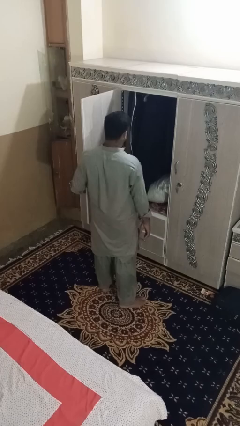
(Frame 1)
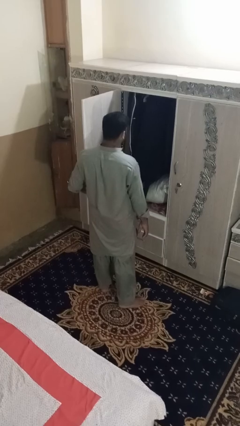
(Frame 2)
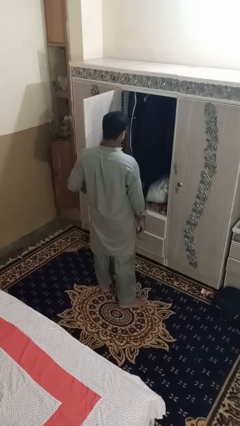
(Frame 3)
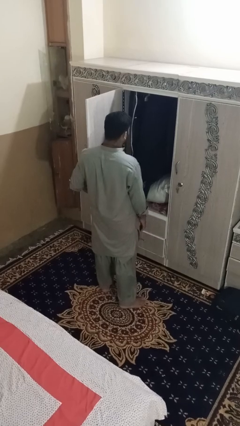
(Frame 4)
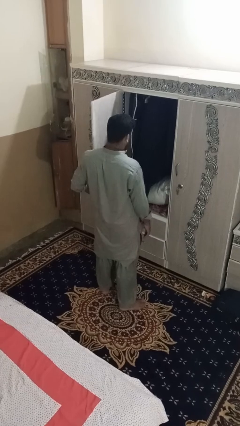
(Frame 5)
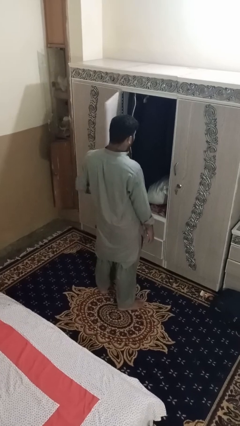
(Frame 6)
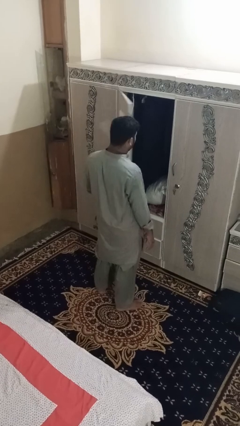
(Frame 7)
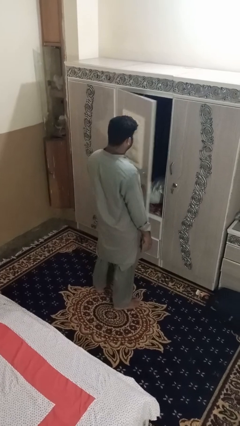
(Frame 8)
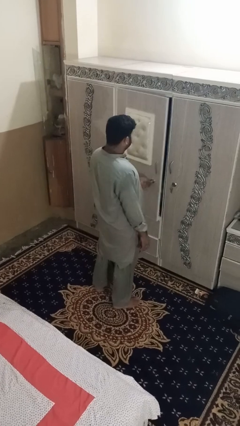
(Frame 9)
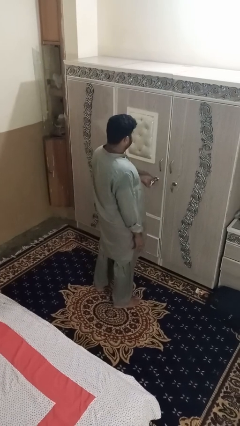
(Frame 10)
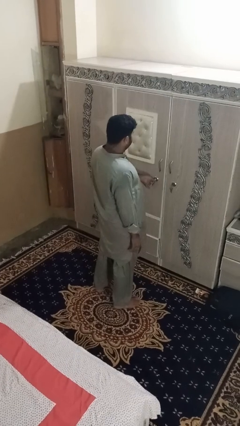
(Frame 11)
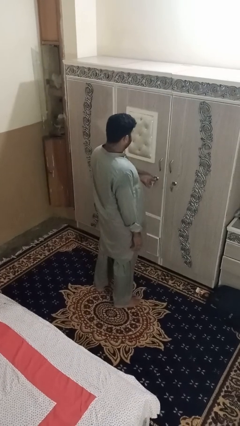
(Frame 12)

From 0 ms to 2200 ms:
person closes dresser drawer

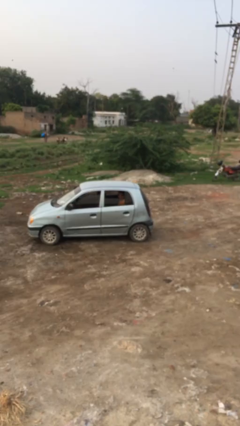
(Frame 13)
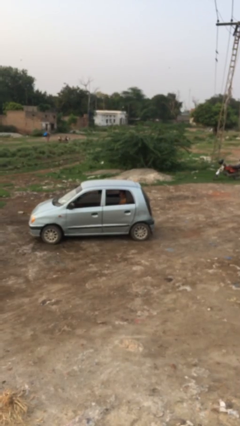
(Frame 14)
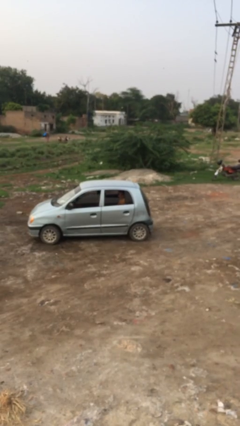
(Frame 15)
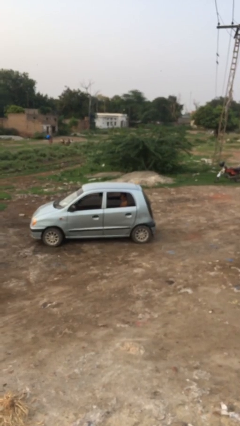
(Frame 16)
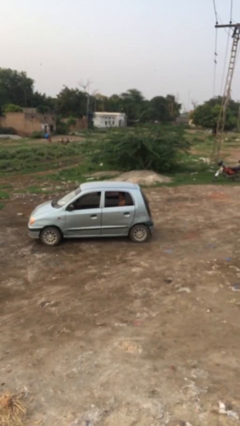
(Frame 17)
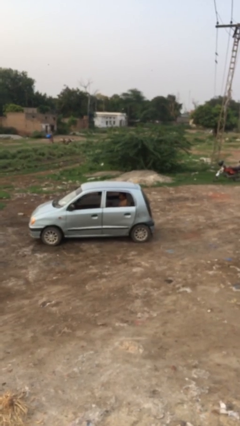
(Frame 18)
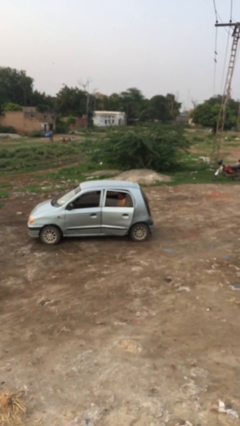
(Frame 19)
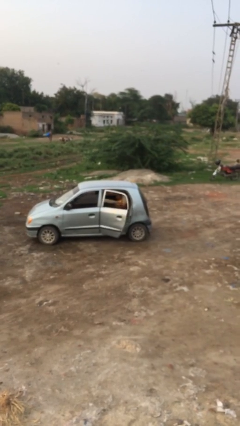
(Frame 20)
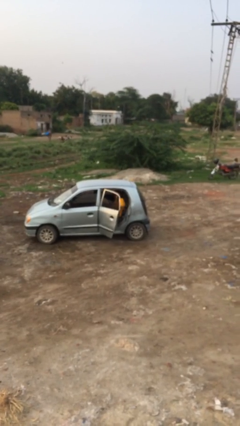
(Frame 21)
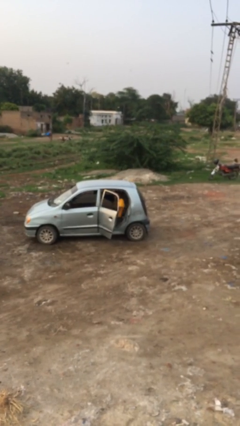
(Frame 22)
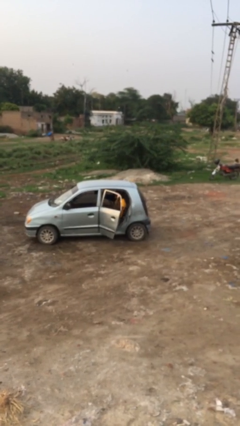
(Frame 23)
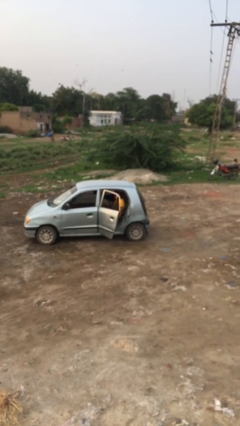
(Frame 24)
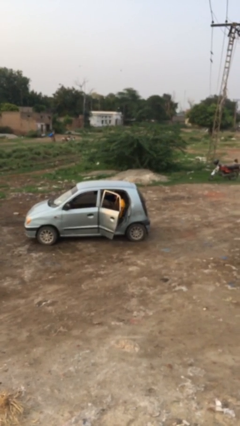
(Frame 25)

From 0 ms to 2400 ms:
person opens car door

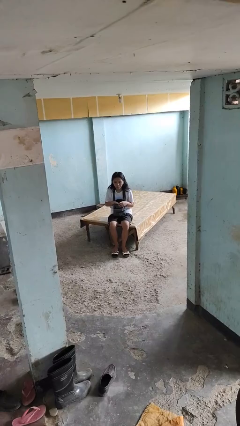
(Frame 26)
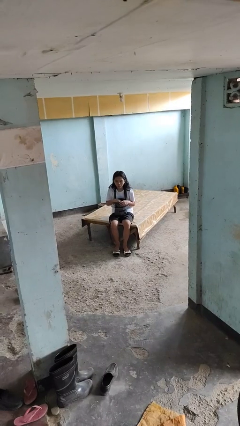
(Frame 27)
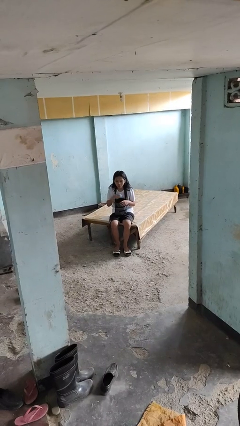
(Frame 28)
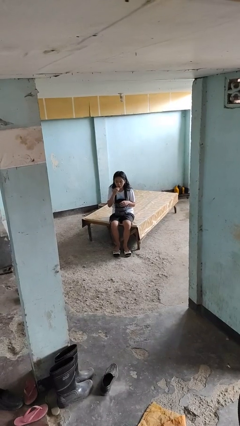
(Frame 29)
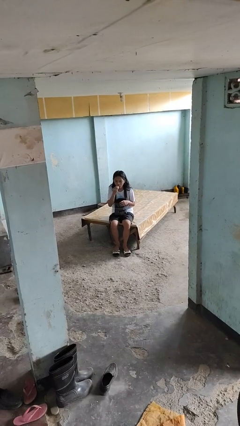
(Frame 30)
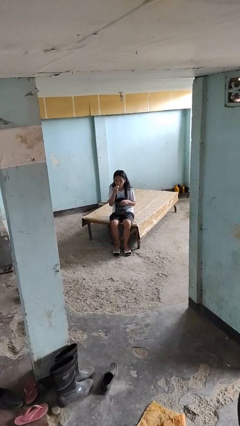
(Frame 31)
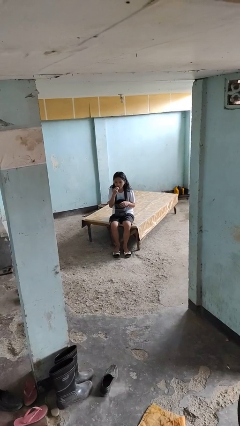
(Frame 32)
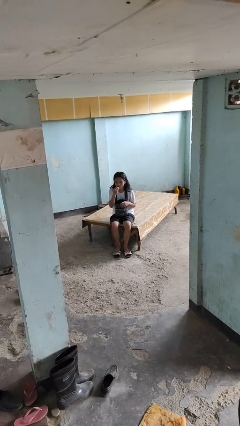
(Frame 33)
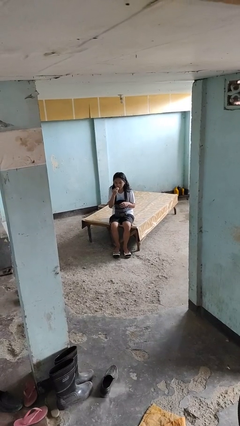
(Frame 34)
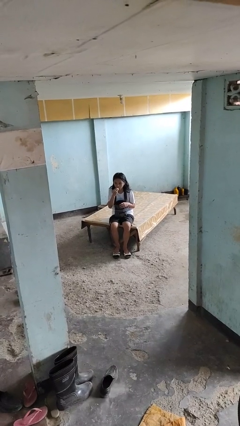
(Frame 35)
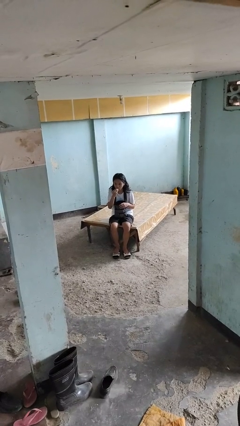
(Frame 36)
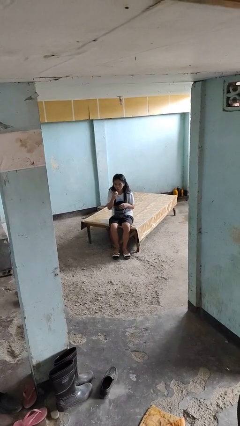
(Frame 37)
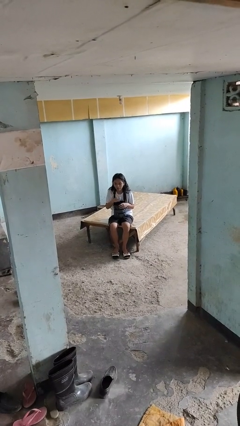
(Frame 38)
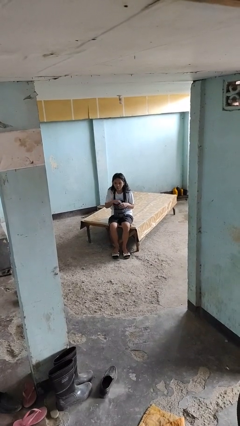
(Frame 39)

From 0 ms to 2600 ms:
person eats snack from bag

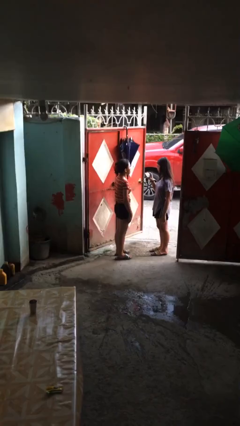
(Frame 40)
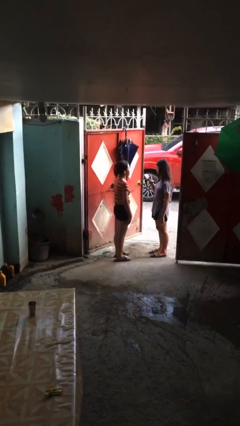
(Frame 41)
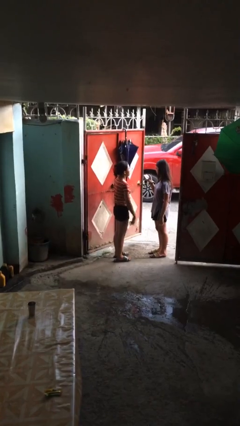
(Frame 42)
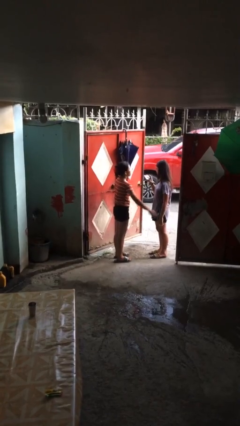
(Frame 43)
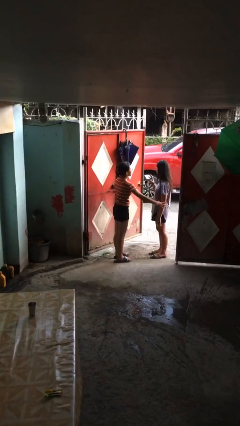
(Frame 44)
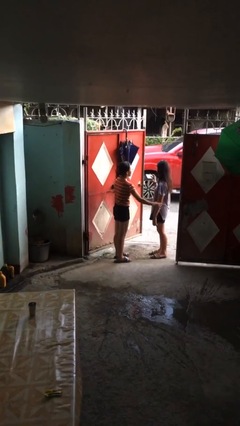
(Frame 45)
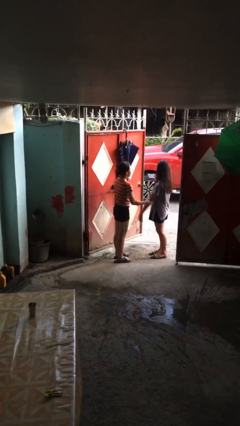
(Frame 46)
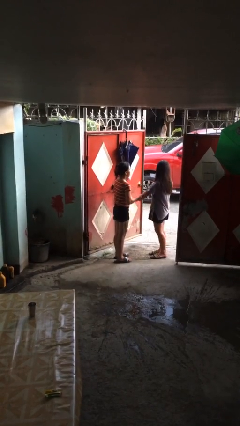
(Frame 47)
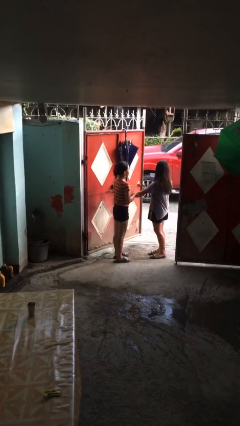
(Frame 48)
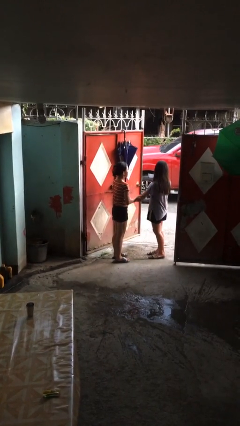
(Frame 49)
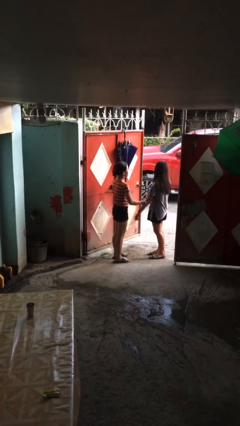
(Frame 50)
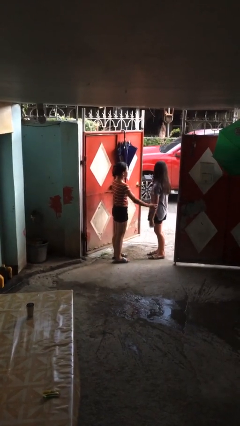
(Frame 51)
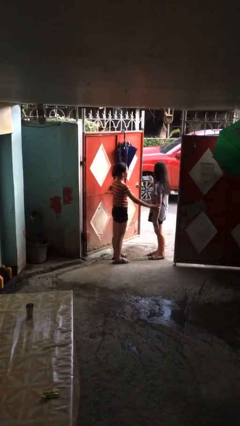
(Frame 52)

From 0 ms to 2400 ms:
person grabs person by forearm

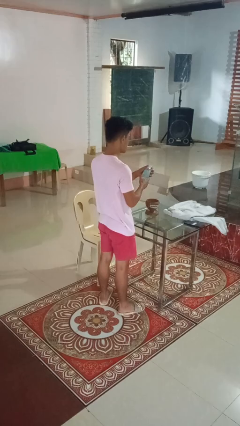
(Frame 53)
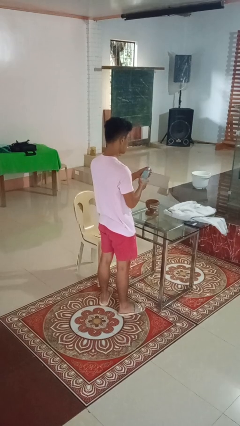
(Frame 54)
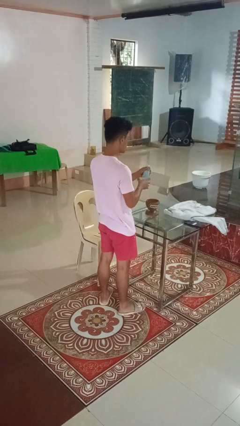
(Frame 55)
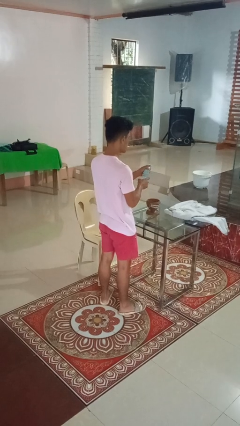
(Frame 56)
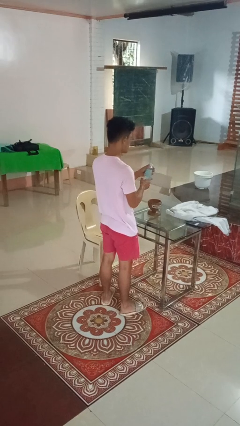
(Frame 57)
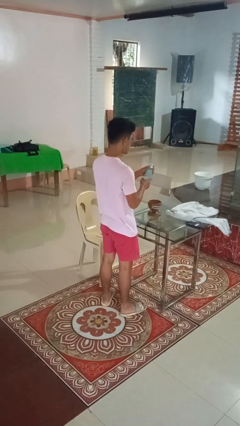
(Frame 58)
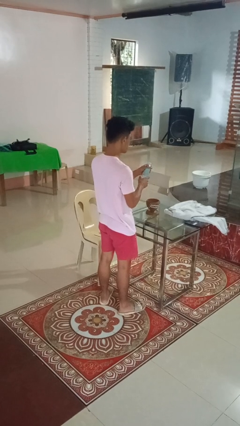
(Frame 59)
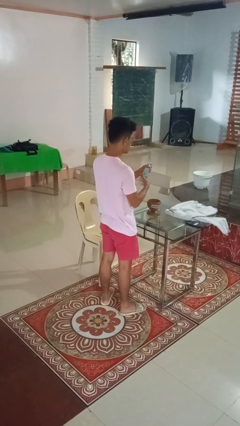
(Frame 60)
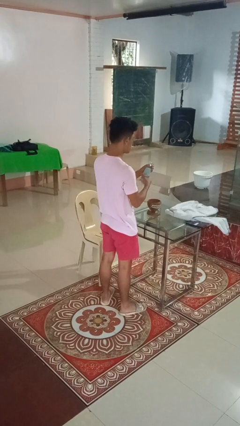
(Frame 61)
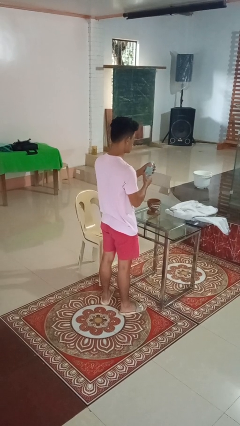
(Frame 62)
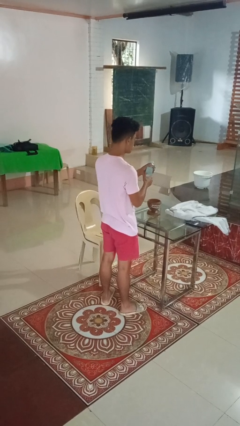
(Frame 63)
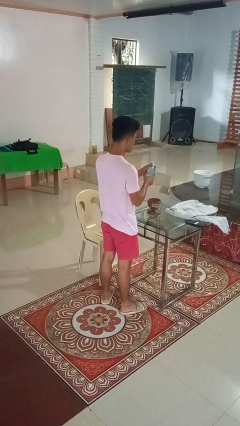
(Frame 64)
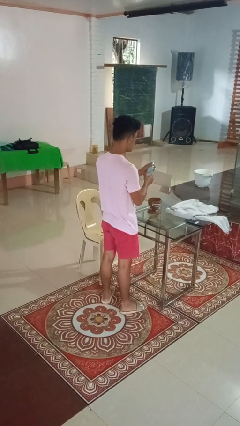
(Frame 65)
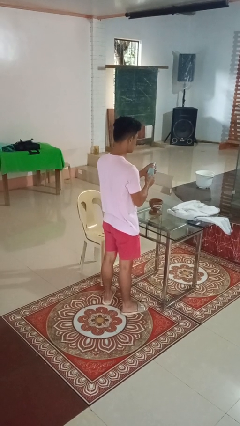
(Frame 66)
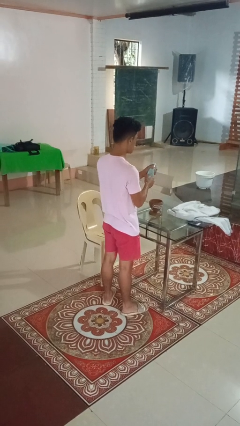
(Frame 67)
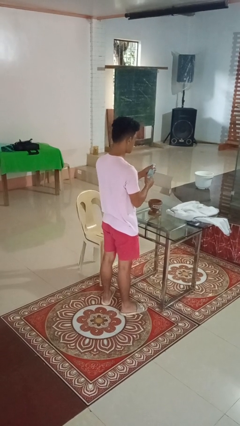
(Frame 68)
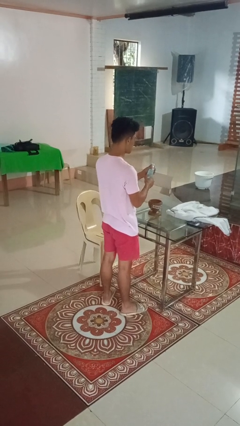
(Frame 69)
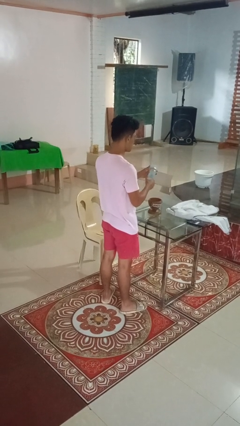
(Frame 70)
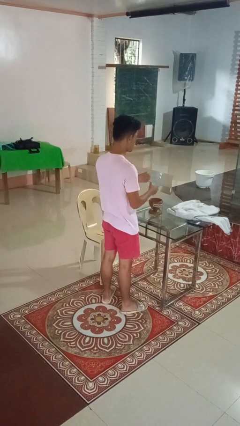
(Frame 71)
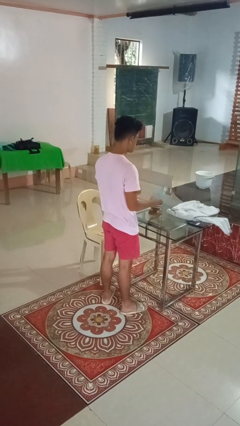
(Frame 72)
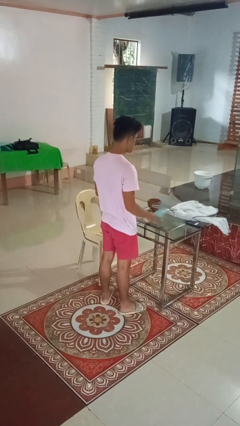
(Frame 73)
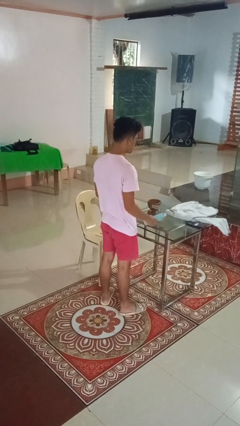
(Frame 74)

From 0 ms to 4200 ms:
person squeezes object

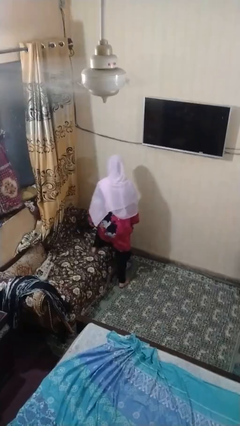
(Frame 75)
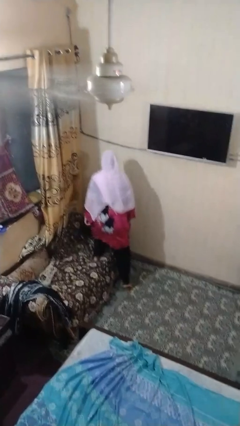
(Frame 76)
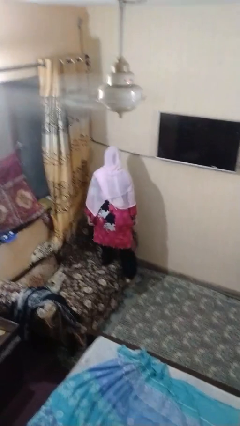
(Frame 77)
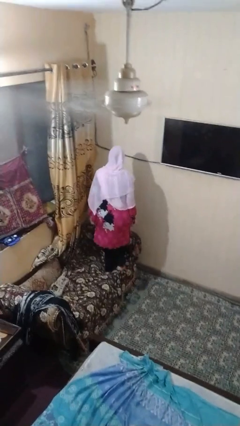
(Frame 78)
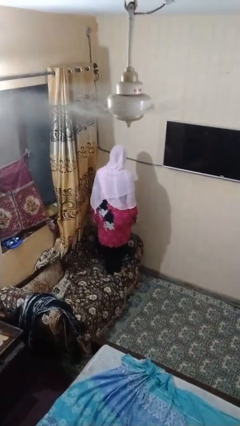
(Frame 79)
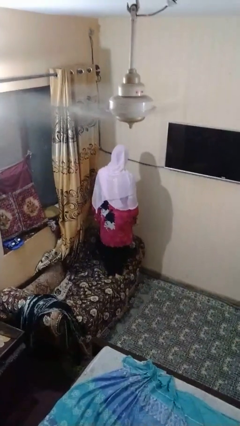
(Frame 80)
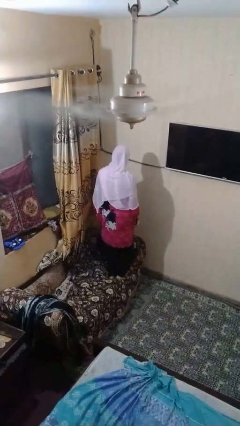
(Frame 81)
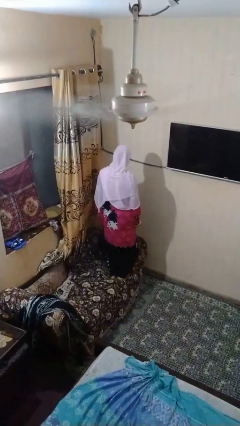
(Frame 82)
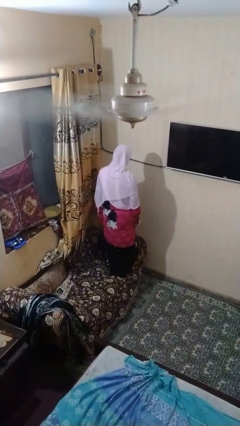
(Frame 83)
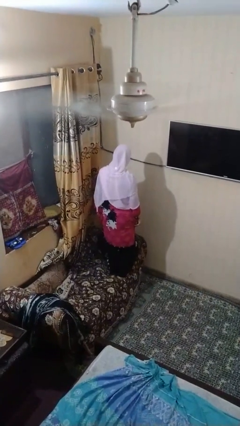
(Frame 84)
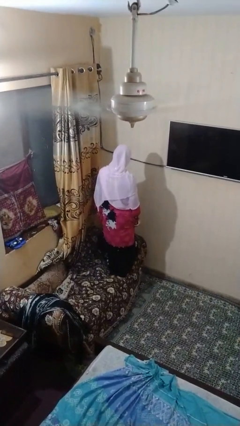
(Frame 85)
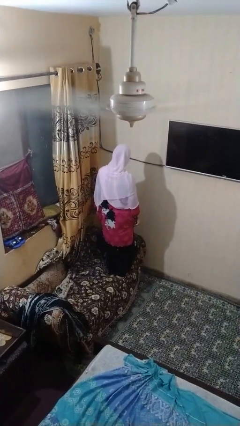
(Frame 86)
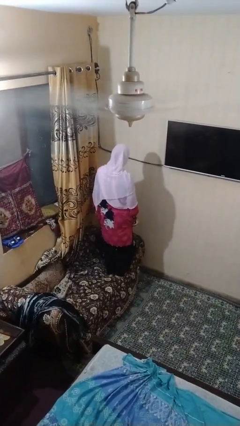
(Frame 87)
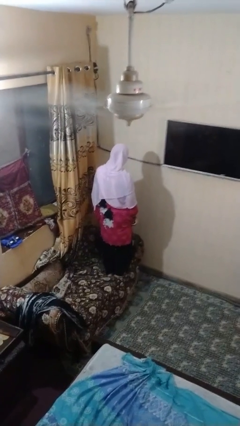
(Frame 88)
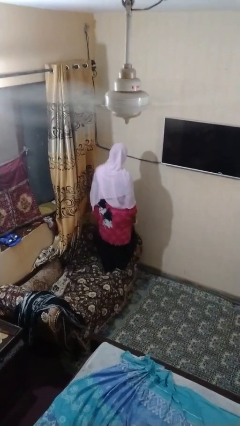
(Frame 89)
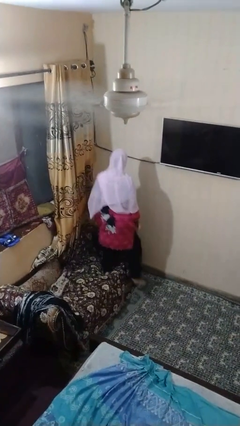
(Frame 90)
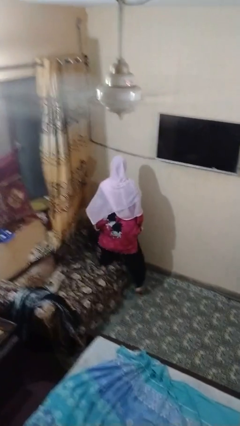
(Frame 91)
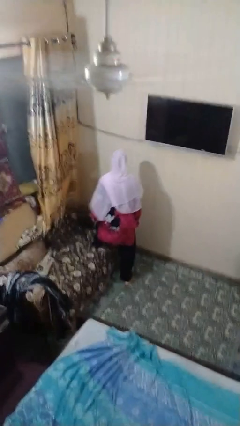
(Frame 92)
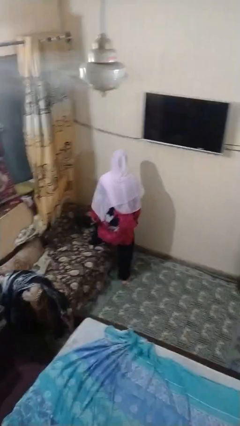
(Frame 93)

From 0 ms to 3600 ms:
person climbs on couch
